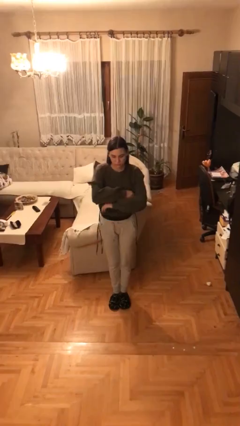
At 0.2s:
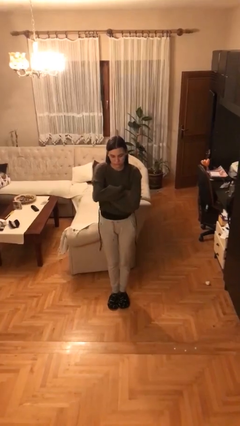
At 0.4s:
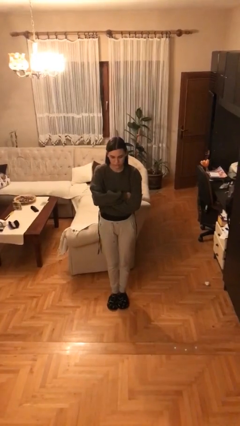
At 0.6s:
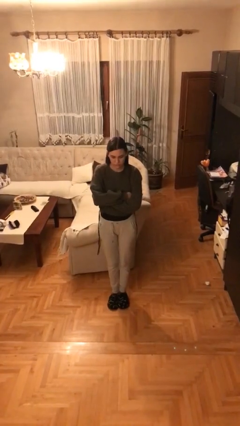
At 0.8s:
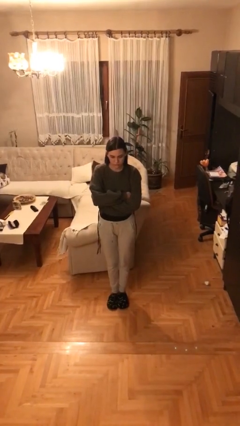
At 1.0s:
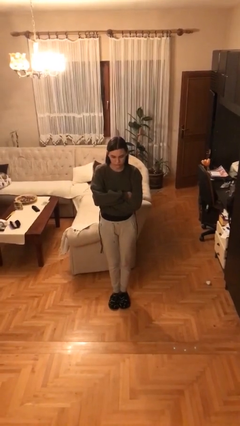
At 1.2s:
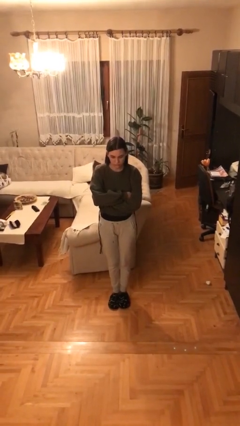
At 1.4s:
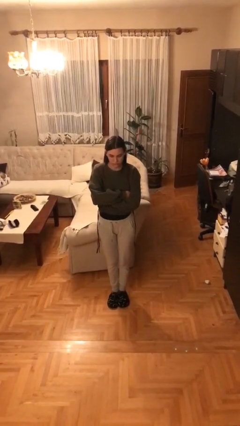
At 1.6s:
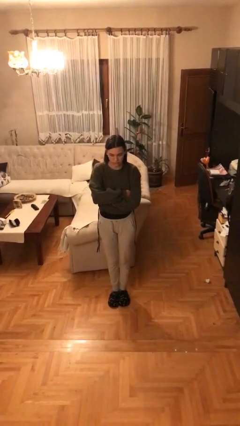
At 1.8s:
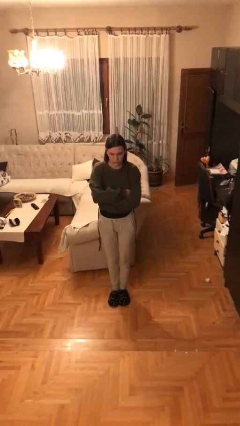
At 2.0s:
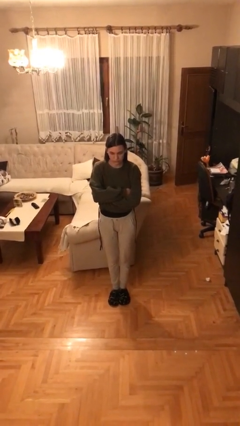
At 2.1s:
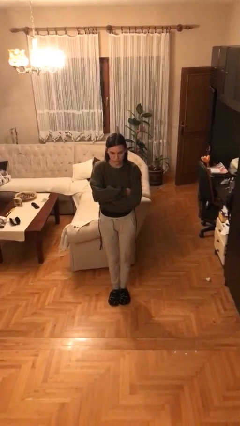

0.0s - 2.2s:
person crosses arms

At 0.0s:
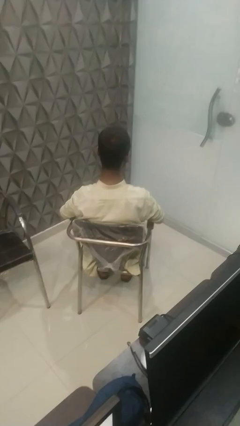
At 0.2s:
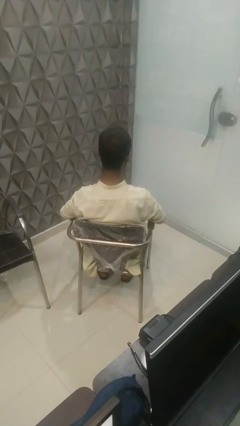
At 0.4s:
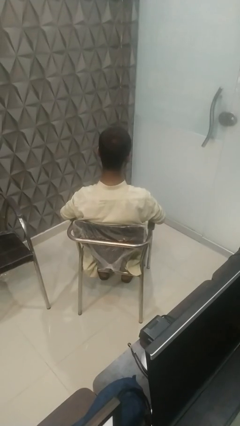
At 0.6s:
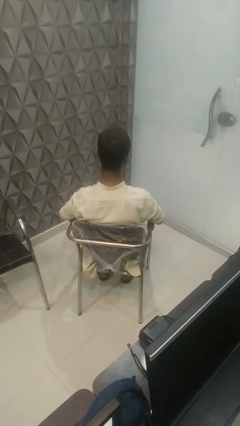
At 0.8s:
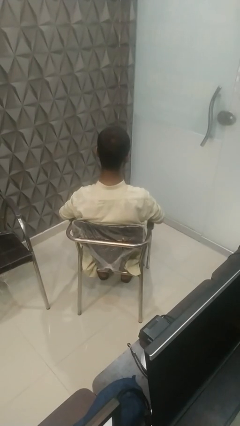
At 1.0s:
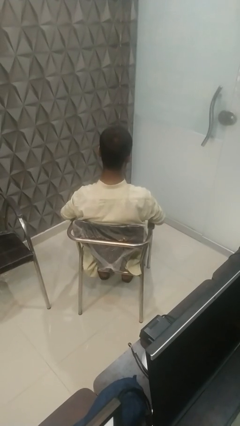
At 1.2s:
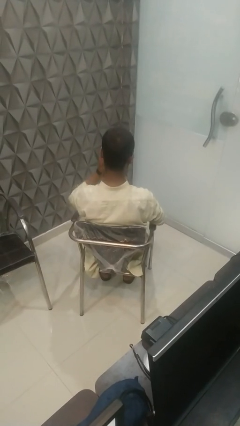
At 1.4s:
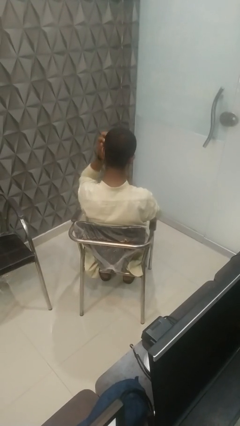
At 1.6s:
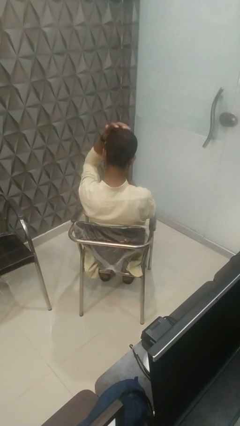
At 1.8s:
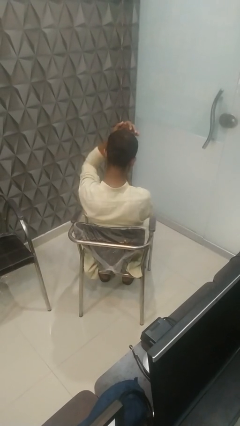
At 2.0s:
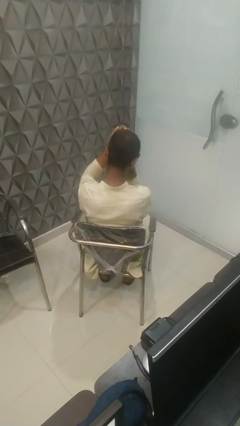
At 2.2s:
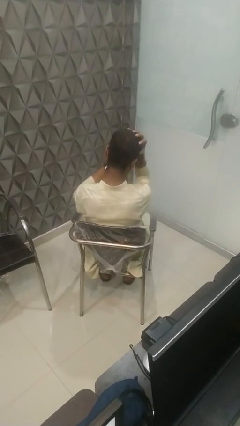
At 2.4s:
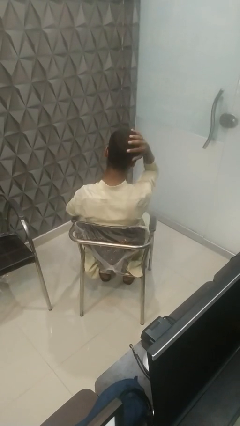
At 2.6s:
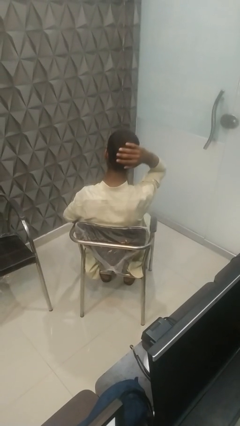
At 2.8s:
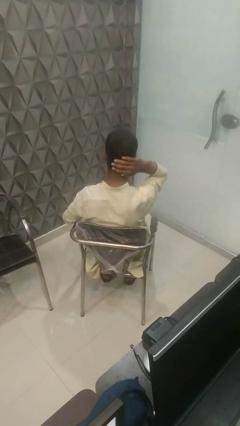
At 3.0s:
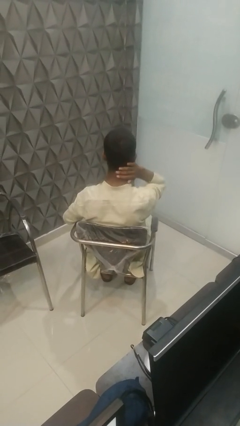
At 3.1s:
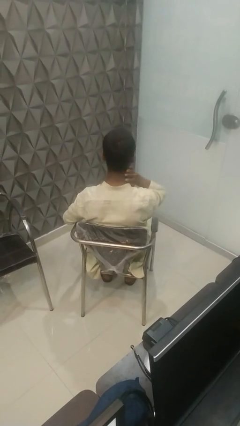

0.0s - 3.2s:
person strokes hair

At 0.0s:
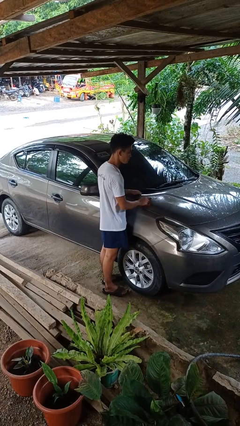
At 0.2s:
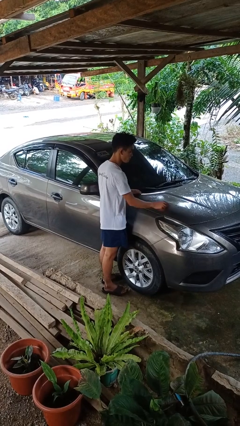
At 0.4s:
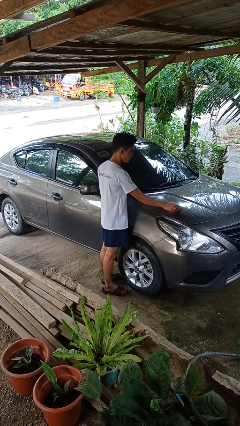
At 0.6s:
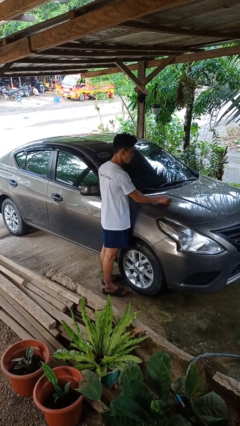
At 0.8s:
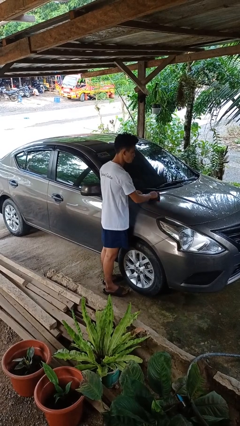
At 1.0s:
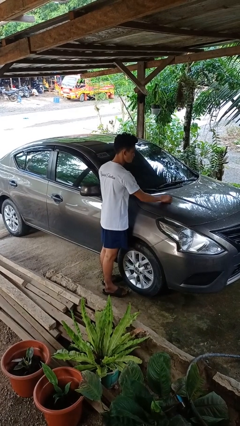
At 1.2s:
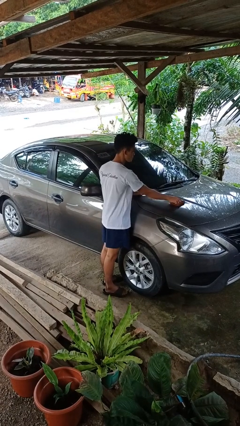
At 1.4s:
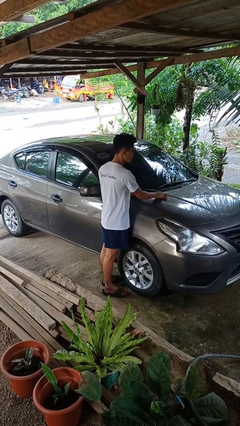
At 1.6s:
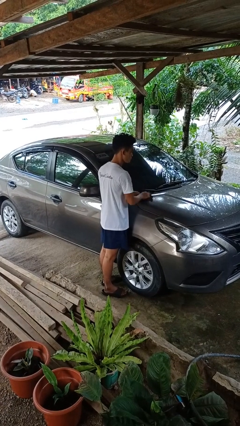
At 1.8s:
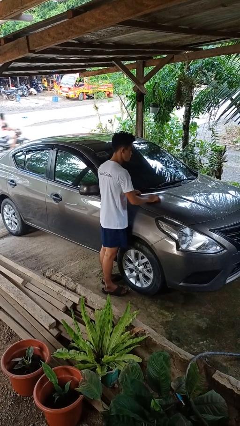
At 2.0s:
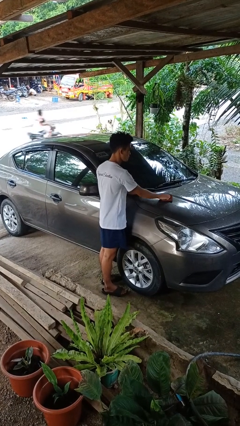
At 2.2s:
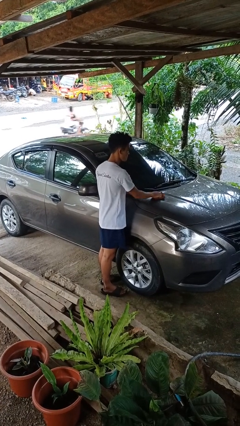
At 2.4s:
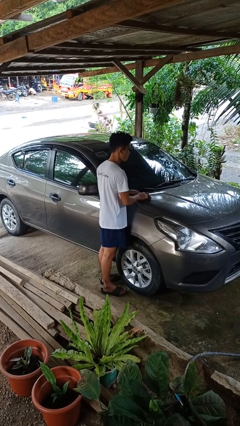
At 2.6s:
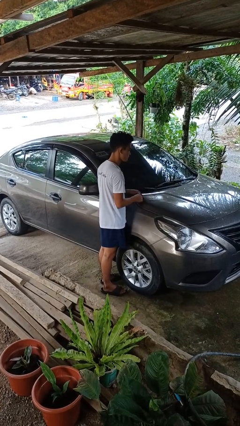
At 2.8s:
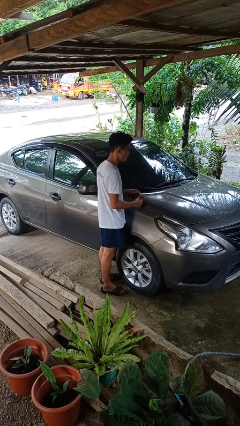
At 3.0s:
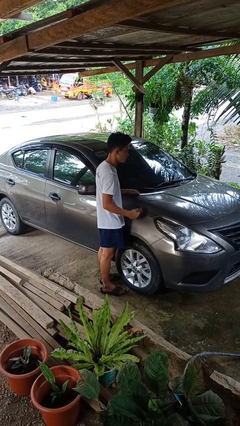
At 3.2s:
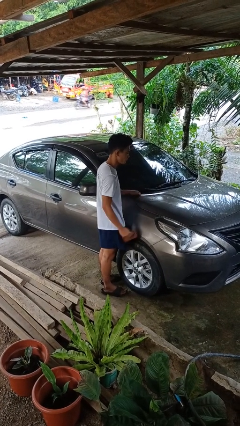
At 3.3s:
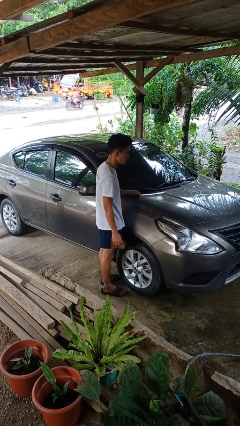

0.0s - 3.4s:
person polishes car with rag

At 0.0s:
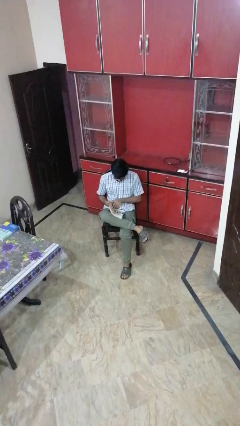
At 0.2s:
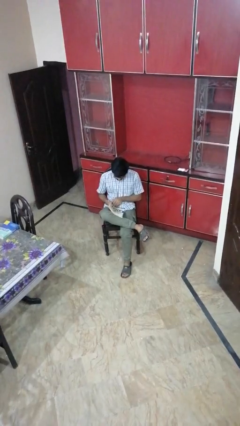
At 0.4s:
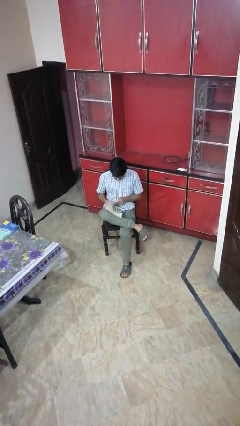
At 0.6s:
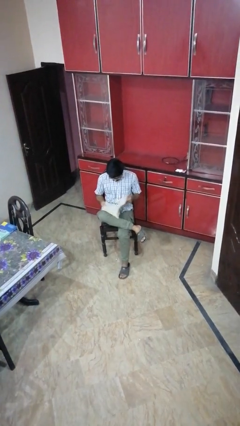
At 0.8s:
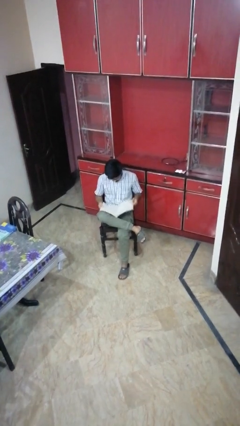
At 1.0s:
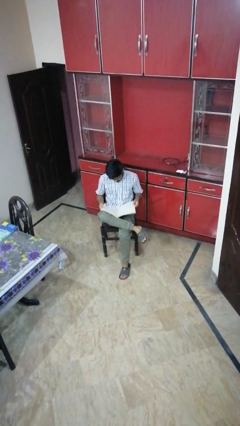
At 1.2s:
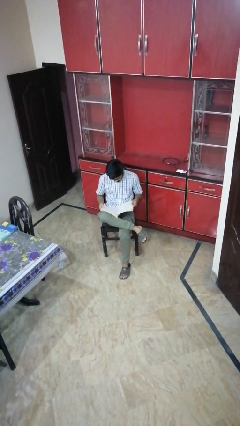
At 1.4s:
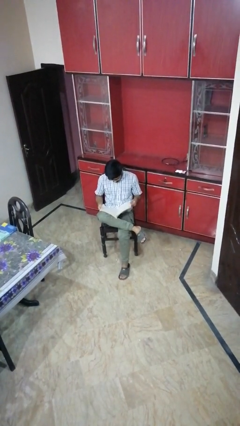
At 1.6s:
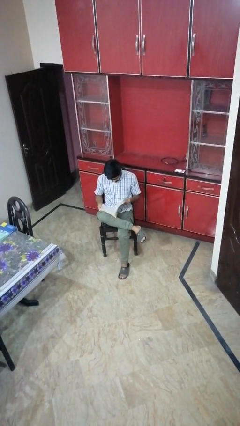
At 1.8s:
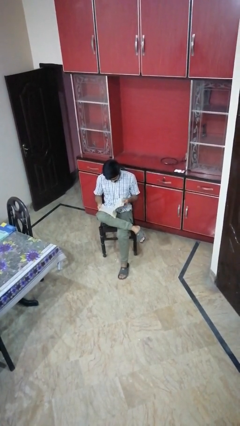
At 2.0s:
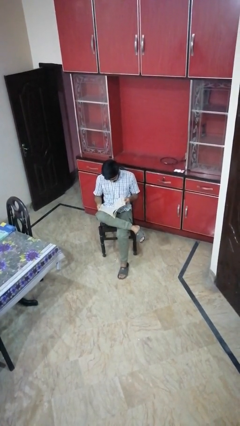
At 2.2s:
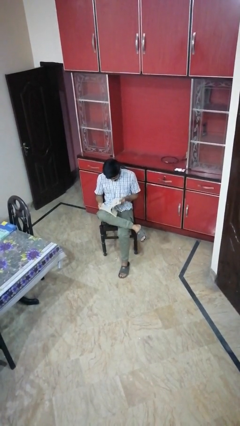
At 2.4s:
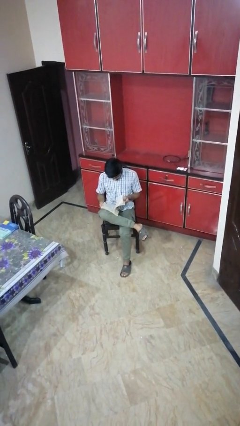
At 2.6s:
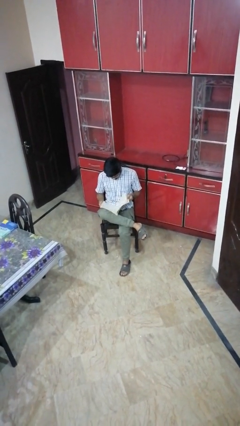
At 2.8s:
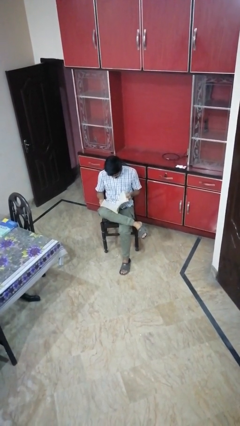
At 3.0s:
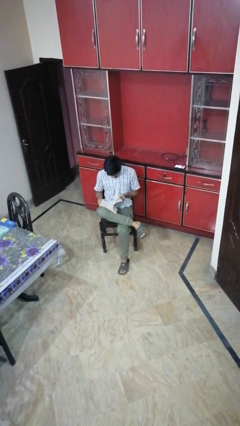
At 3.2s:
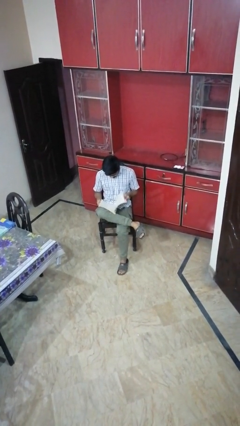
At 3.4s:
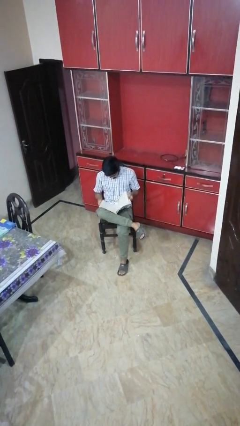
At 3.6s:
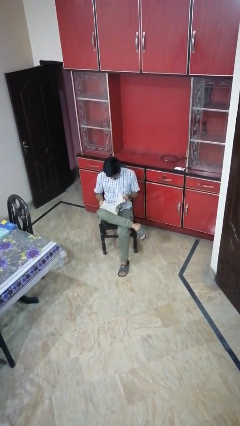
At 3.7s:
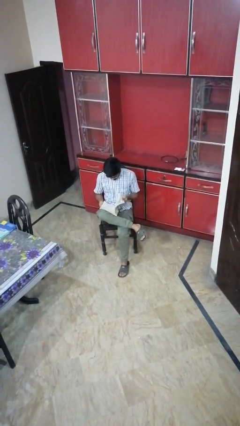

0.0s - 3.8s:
person exercises with situp

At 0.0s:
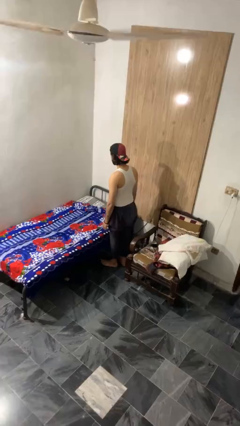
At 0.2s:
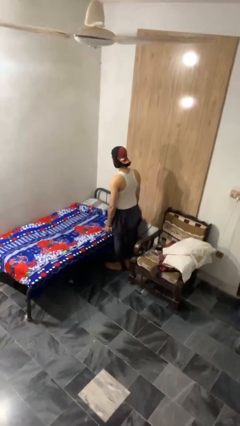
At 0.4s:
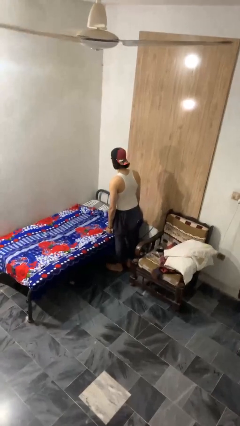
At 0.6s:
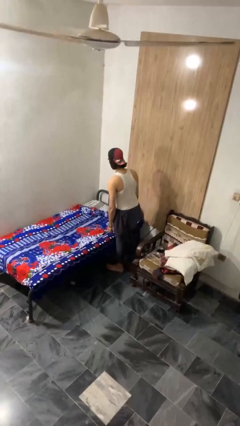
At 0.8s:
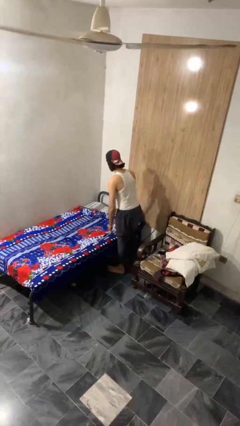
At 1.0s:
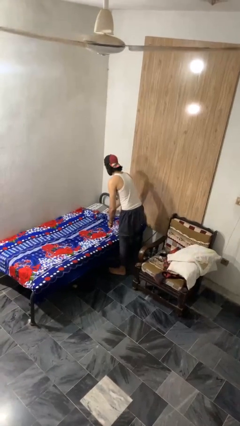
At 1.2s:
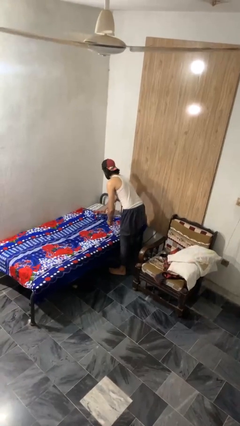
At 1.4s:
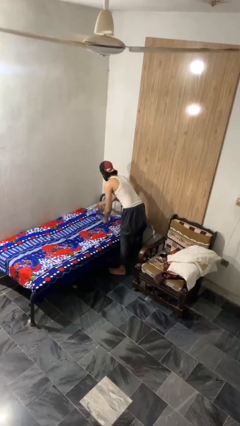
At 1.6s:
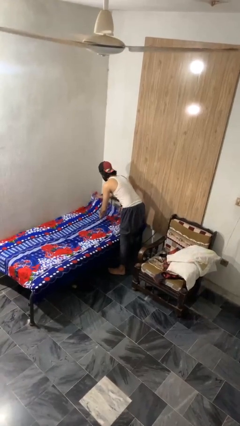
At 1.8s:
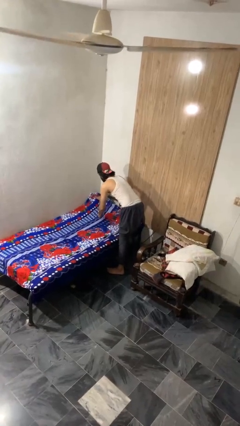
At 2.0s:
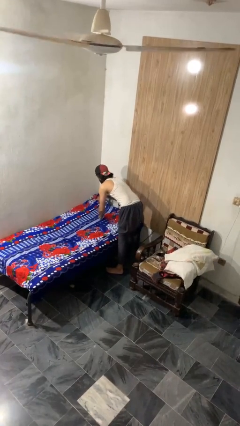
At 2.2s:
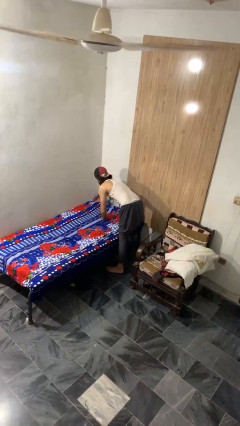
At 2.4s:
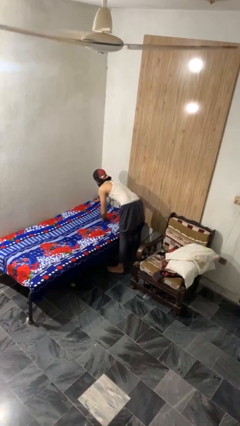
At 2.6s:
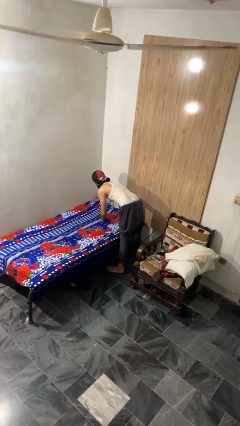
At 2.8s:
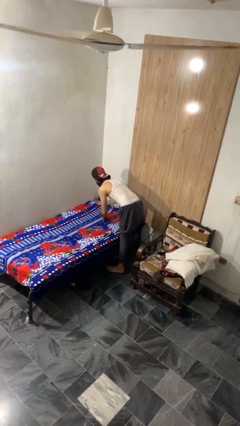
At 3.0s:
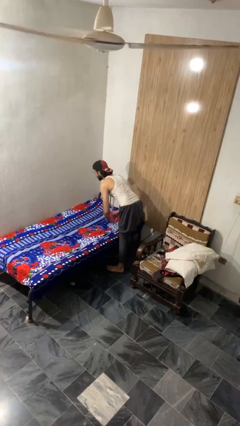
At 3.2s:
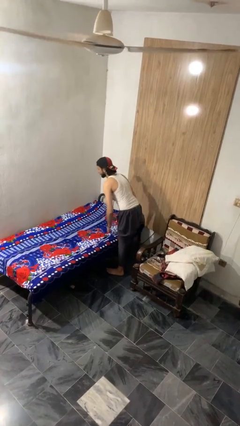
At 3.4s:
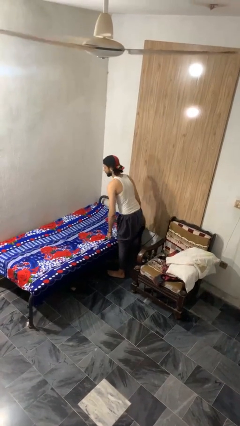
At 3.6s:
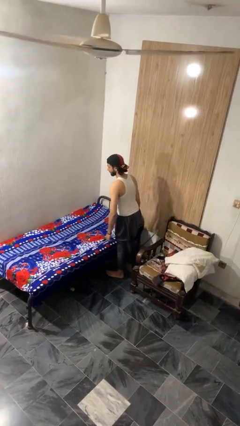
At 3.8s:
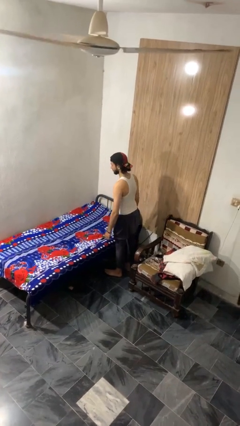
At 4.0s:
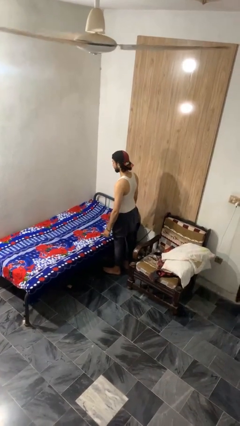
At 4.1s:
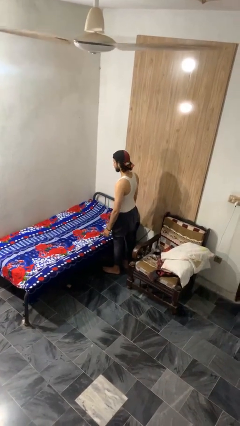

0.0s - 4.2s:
person makes bed

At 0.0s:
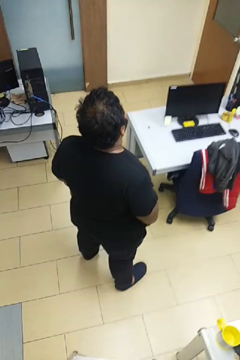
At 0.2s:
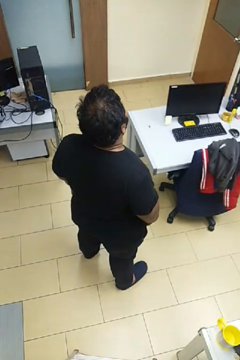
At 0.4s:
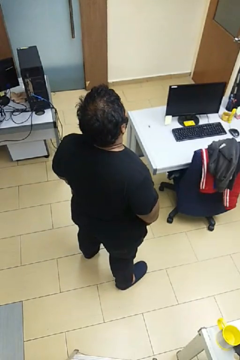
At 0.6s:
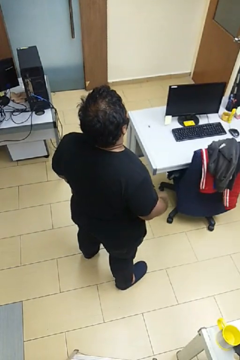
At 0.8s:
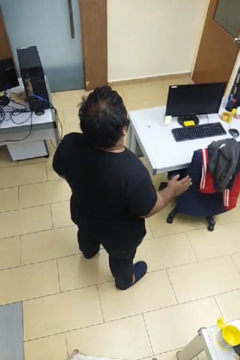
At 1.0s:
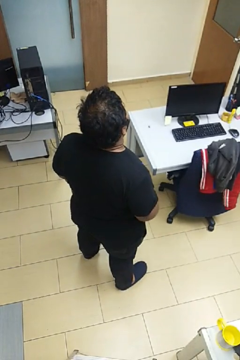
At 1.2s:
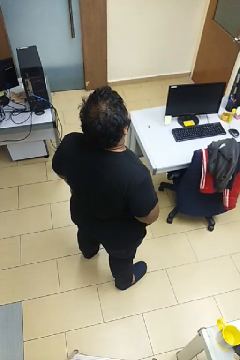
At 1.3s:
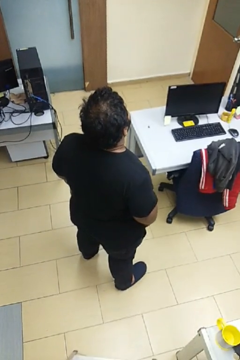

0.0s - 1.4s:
person slaps hands on thighs
